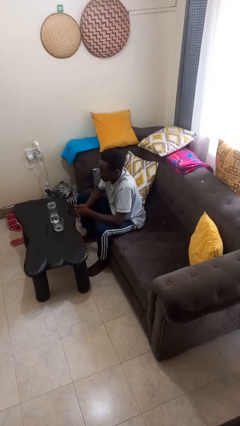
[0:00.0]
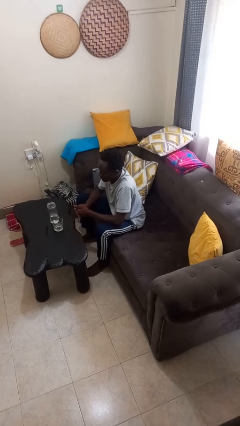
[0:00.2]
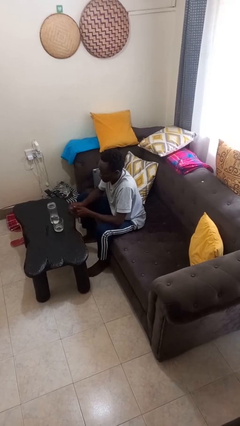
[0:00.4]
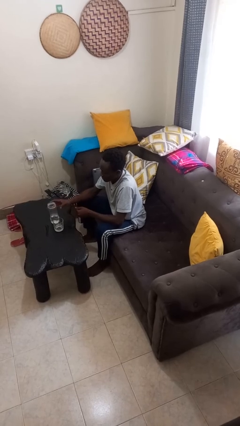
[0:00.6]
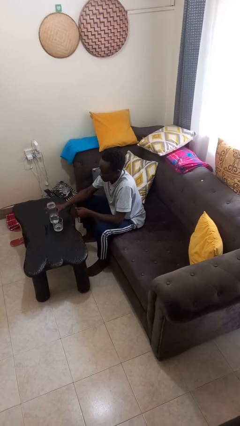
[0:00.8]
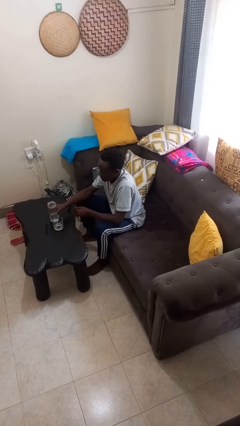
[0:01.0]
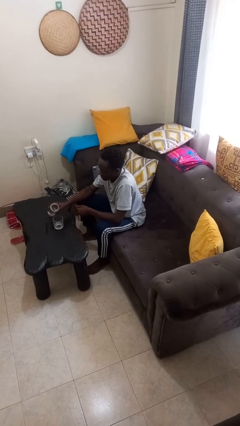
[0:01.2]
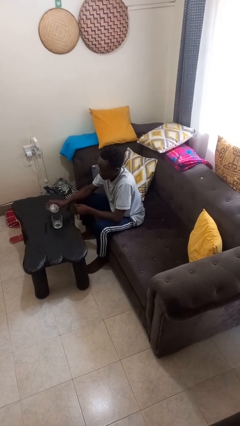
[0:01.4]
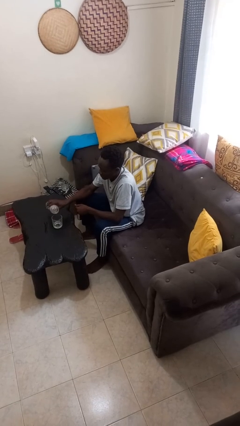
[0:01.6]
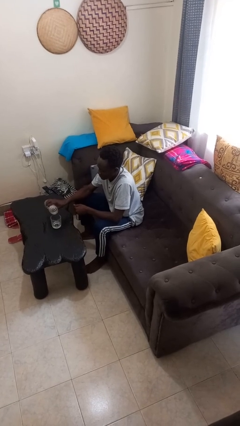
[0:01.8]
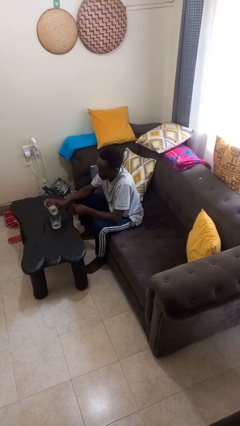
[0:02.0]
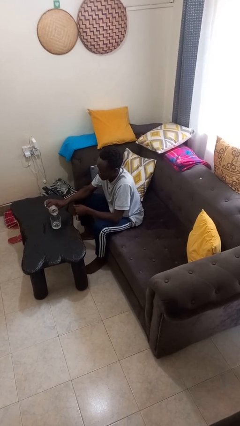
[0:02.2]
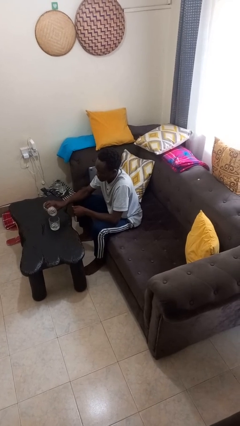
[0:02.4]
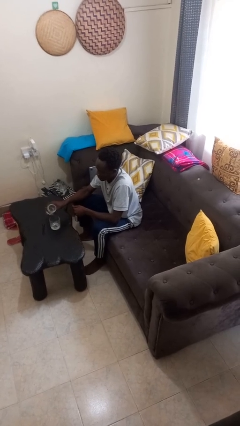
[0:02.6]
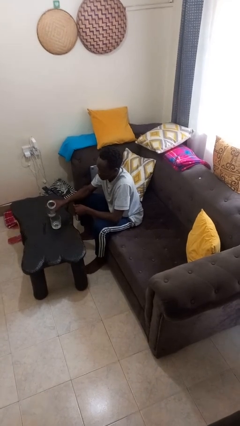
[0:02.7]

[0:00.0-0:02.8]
person pours liquid into cup

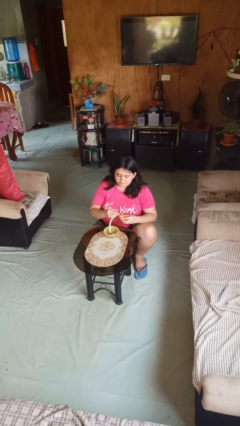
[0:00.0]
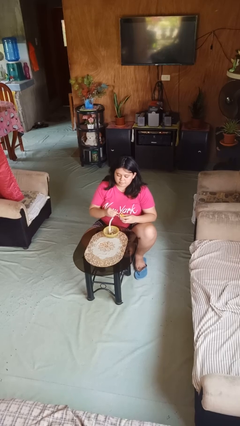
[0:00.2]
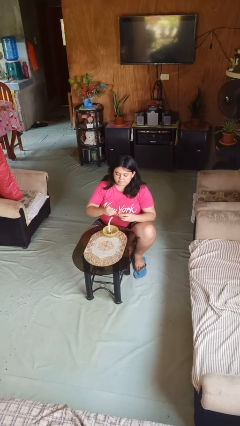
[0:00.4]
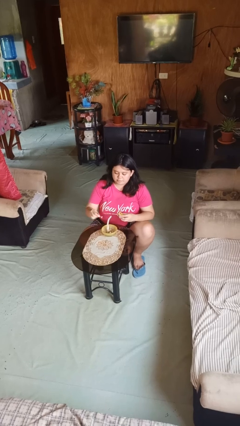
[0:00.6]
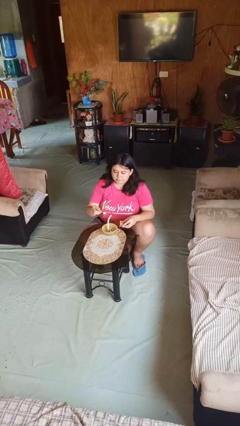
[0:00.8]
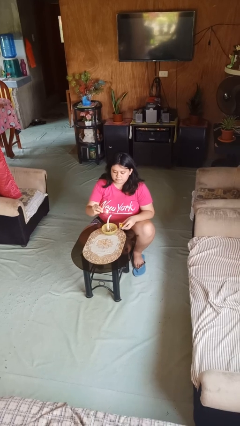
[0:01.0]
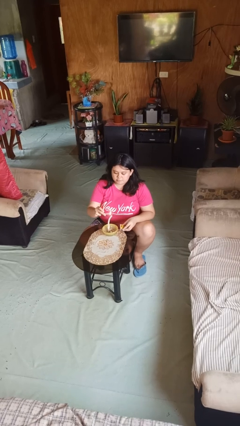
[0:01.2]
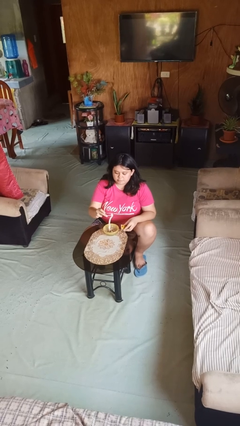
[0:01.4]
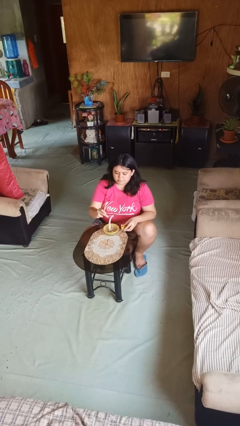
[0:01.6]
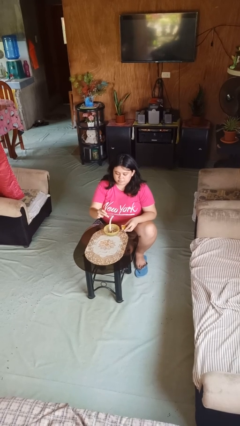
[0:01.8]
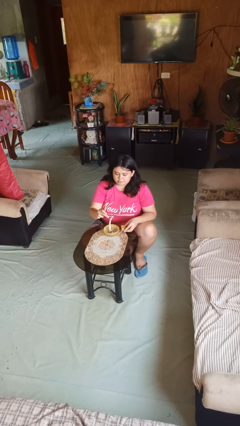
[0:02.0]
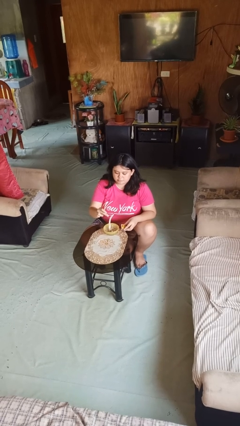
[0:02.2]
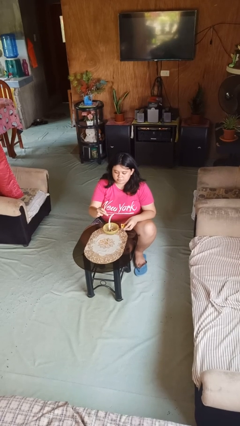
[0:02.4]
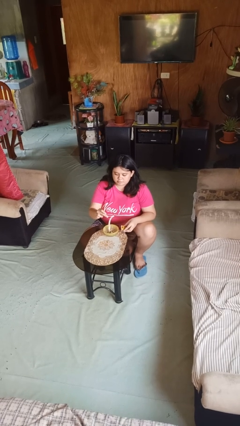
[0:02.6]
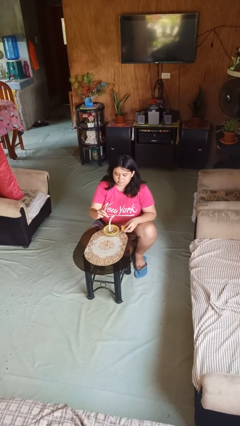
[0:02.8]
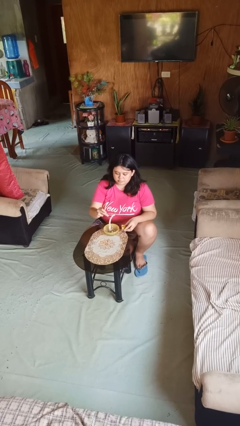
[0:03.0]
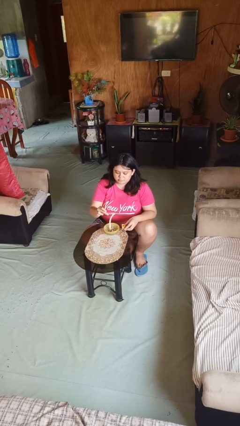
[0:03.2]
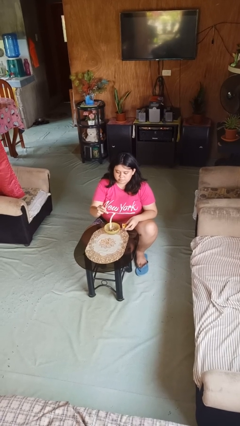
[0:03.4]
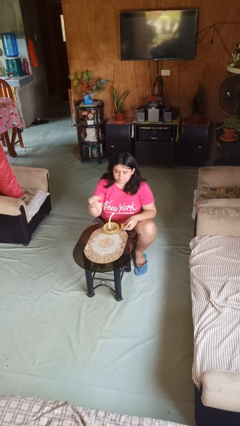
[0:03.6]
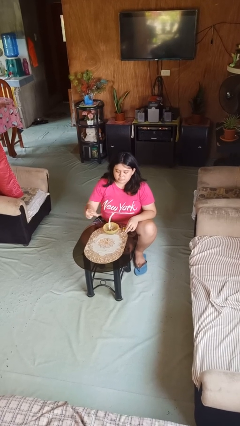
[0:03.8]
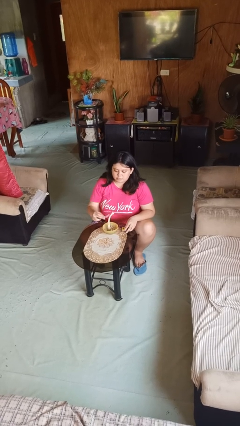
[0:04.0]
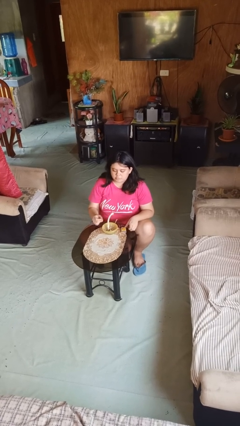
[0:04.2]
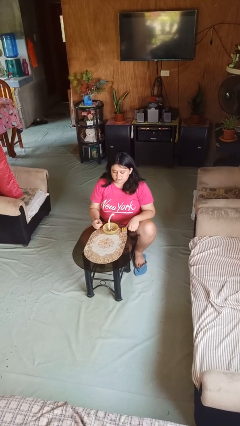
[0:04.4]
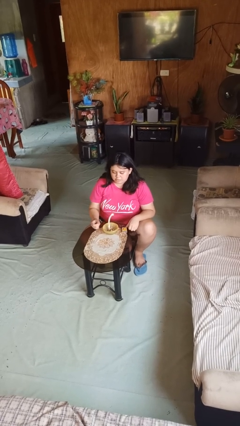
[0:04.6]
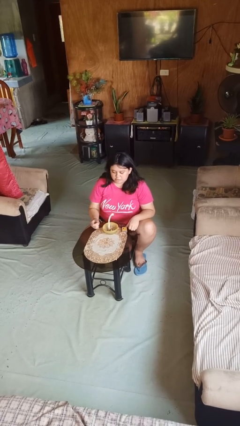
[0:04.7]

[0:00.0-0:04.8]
person lights candle

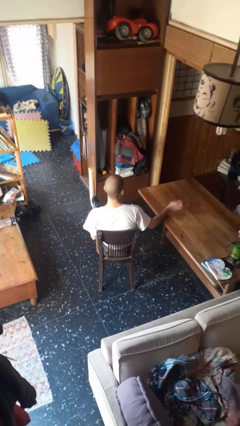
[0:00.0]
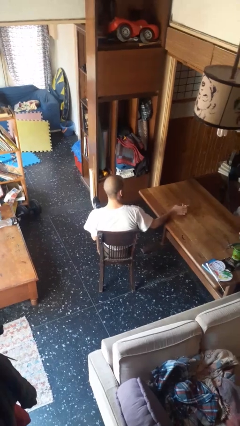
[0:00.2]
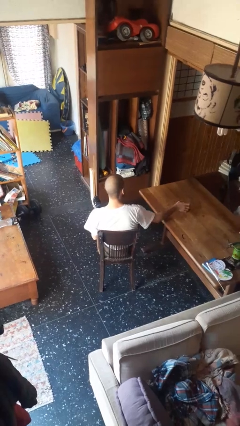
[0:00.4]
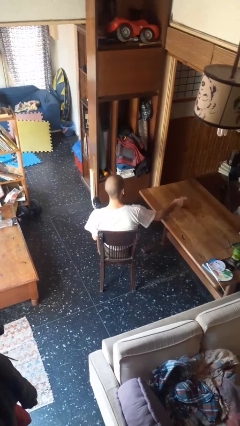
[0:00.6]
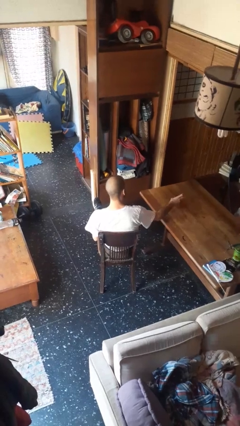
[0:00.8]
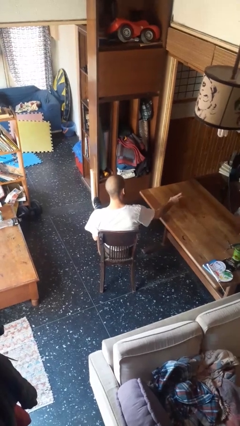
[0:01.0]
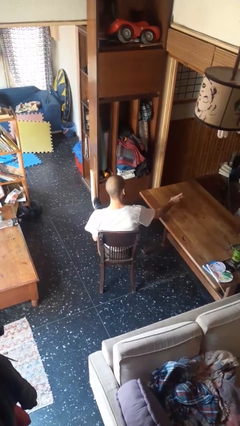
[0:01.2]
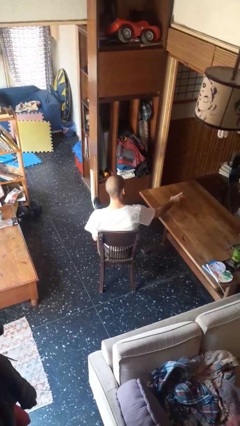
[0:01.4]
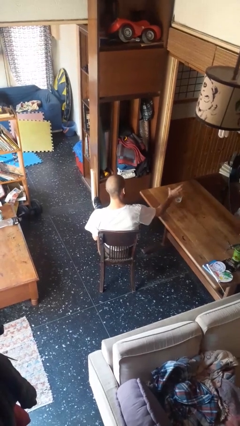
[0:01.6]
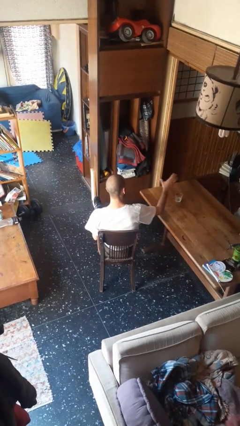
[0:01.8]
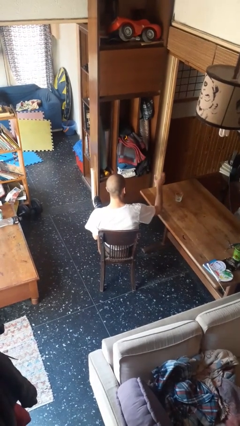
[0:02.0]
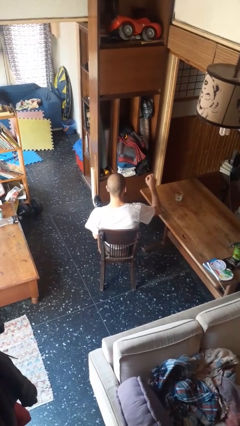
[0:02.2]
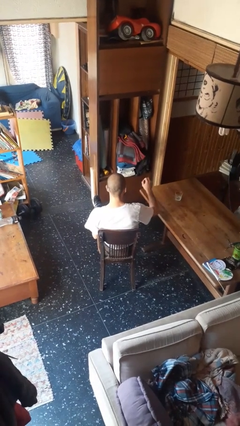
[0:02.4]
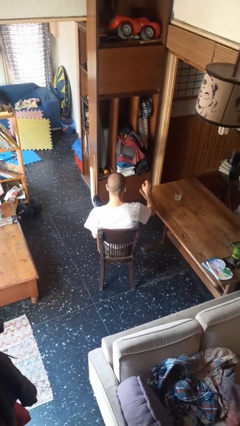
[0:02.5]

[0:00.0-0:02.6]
person sets upright glass

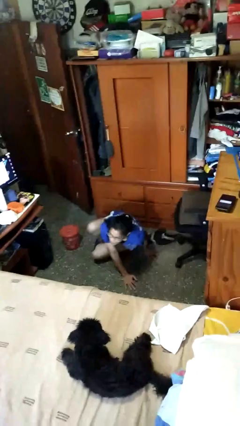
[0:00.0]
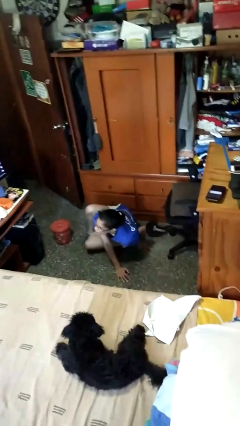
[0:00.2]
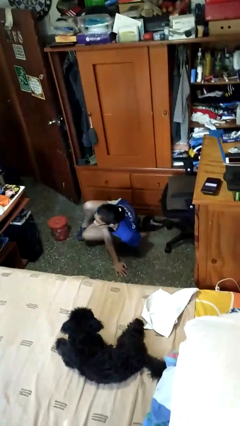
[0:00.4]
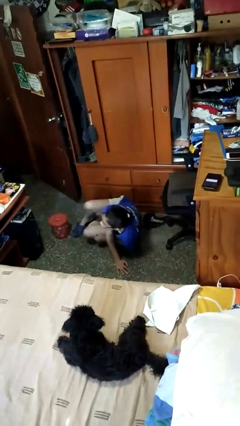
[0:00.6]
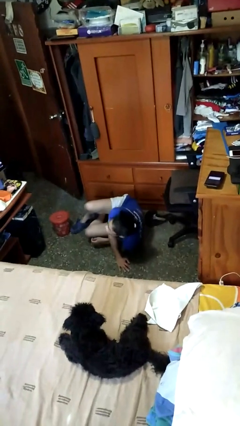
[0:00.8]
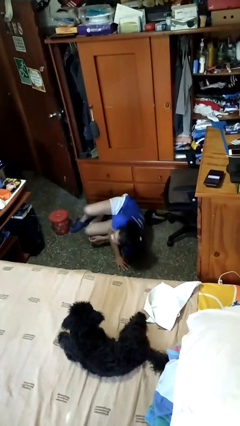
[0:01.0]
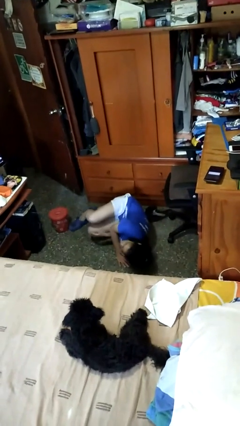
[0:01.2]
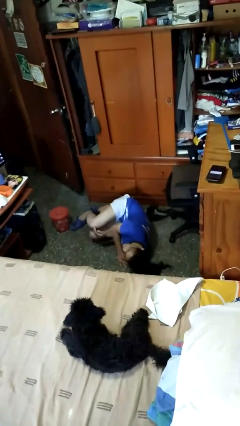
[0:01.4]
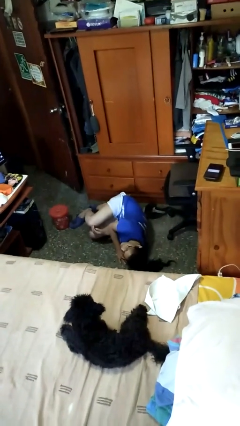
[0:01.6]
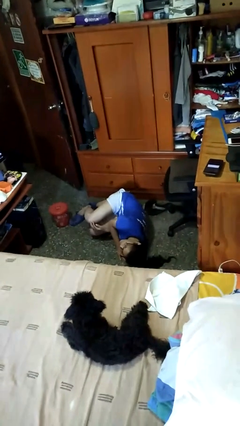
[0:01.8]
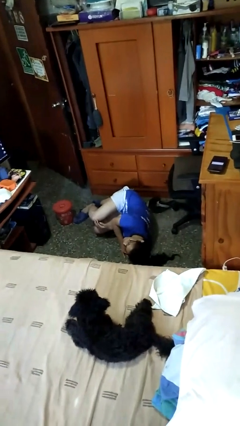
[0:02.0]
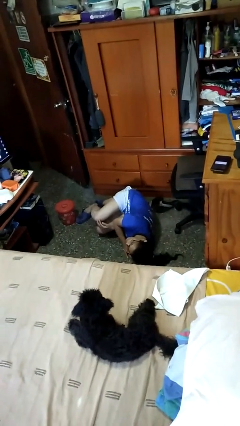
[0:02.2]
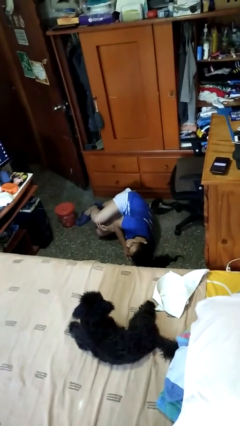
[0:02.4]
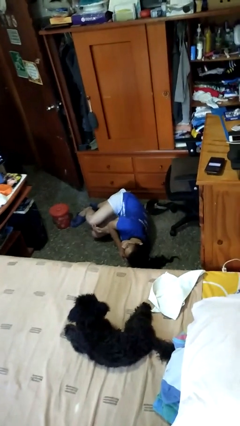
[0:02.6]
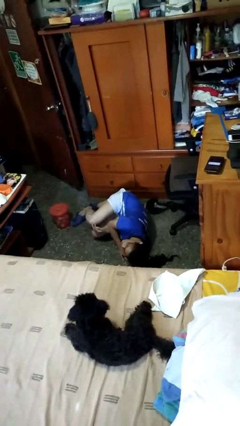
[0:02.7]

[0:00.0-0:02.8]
person lies down on floor

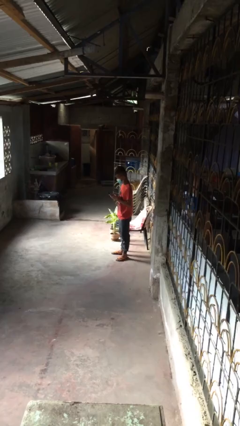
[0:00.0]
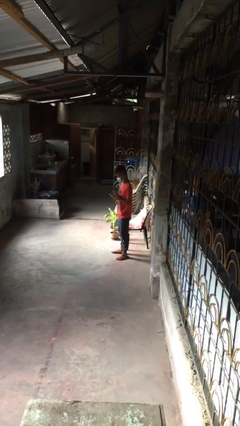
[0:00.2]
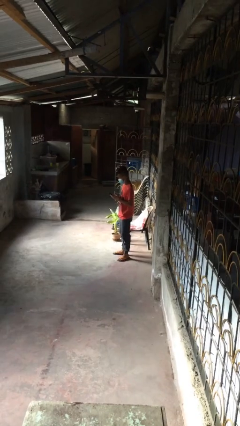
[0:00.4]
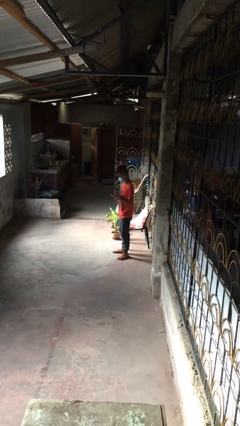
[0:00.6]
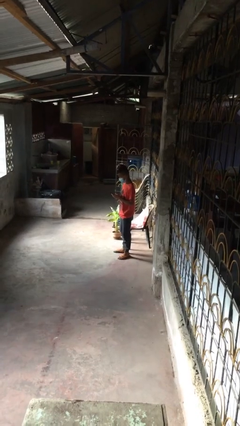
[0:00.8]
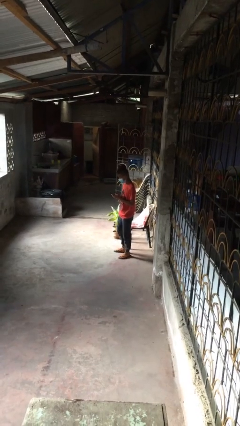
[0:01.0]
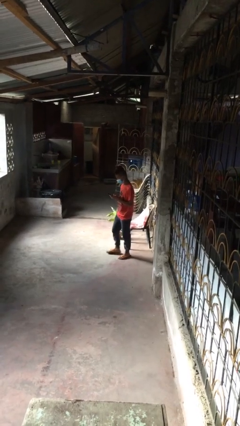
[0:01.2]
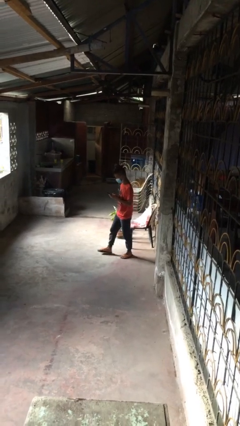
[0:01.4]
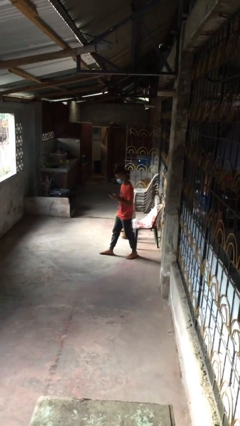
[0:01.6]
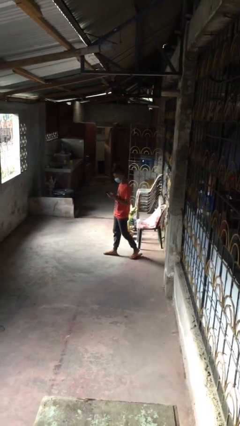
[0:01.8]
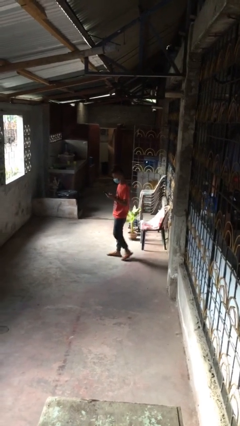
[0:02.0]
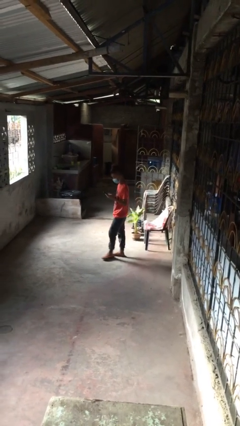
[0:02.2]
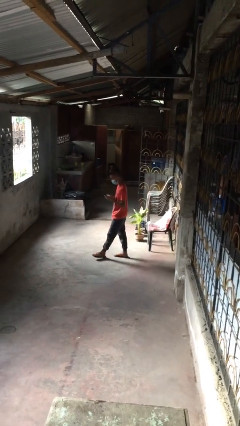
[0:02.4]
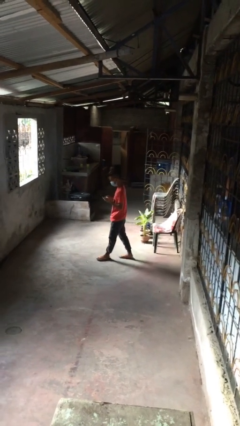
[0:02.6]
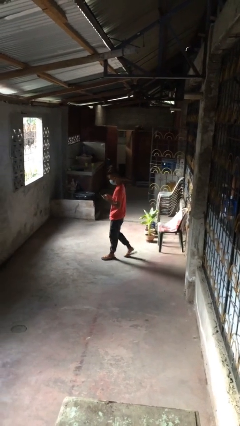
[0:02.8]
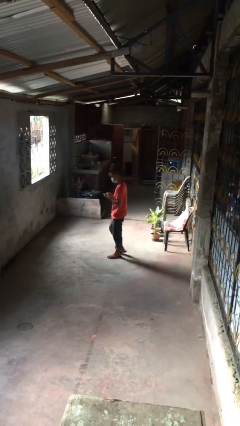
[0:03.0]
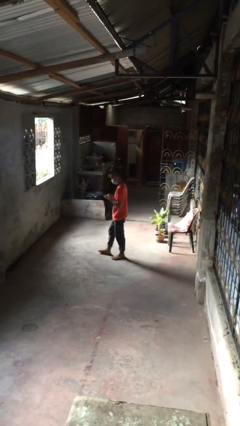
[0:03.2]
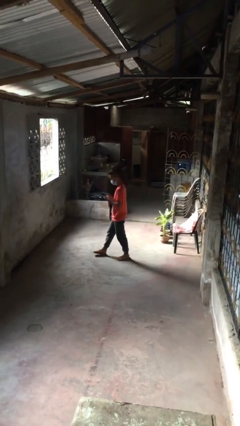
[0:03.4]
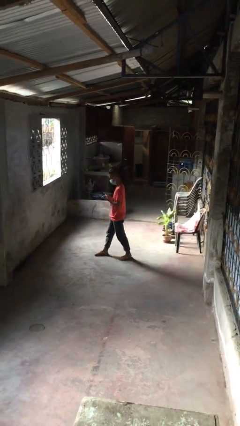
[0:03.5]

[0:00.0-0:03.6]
person texts on phone

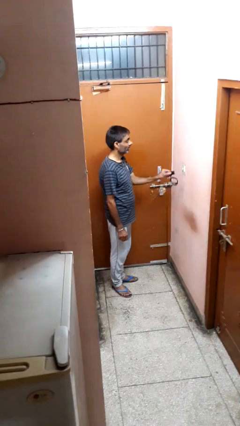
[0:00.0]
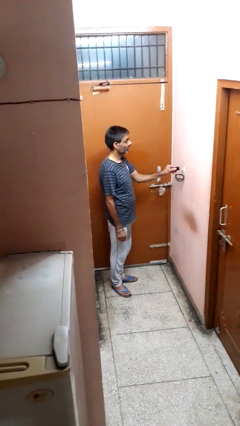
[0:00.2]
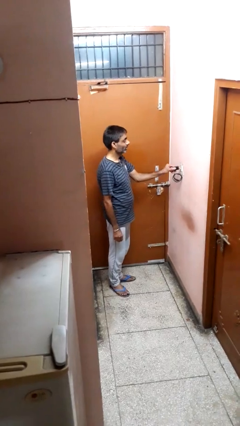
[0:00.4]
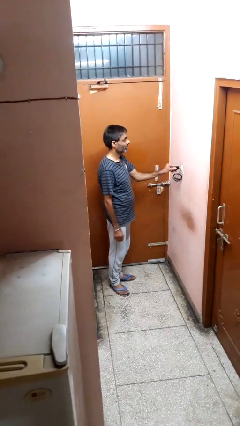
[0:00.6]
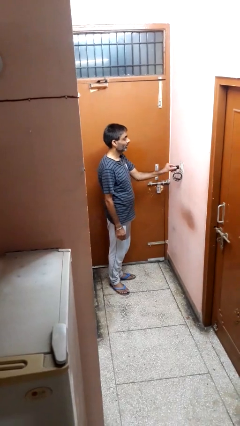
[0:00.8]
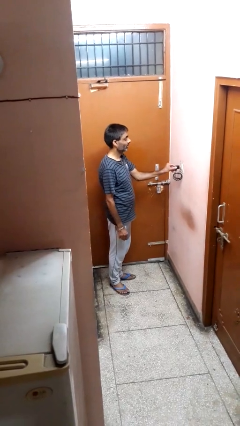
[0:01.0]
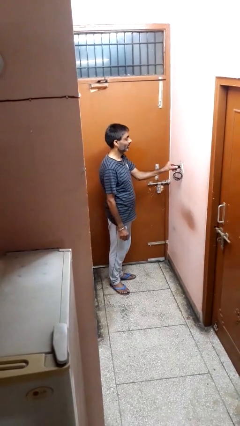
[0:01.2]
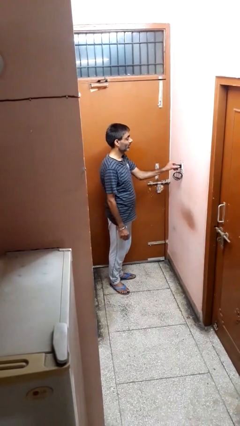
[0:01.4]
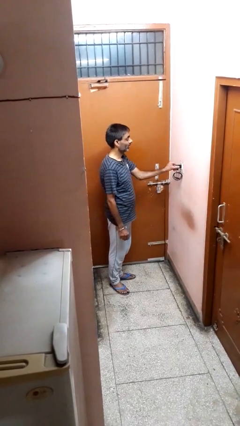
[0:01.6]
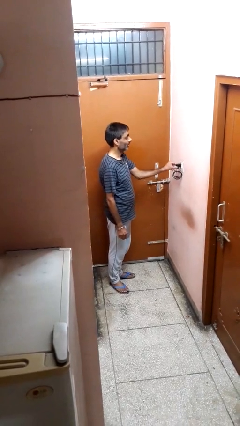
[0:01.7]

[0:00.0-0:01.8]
person plugs into electrical socket
